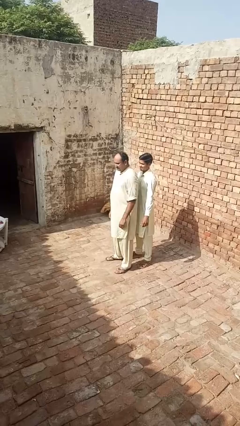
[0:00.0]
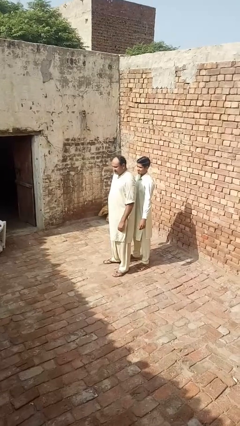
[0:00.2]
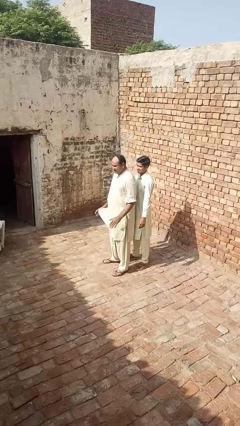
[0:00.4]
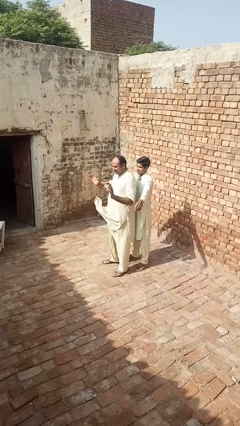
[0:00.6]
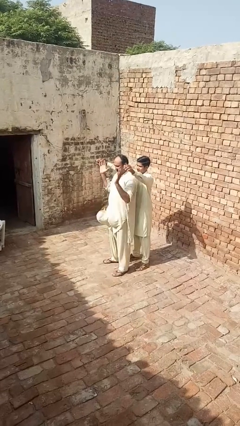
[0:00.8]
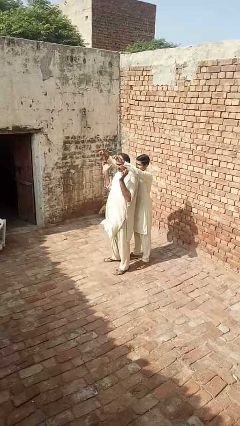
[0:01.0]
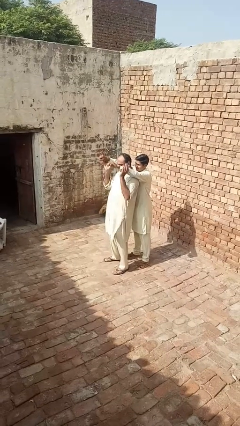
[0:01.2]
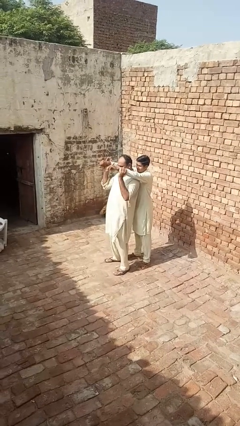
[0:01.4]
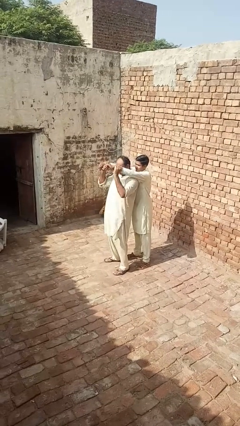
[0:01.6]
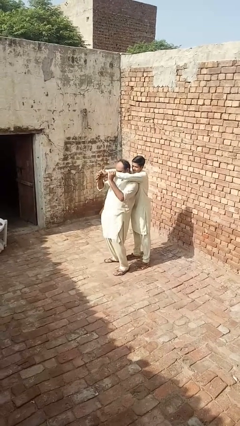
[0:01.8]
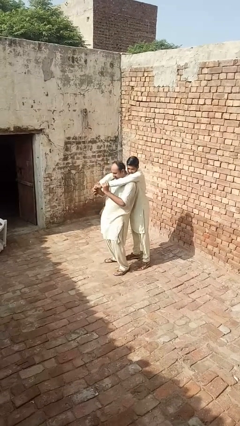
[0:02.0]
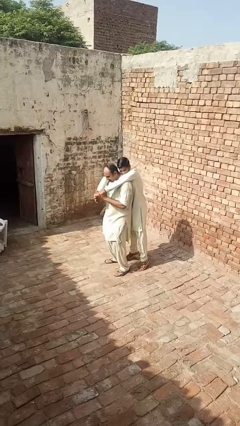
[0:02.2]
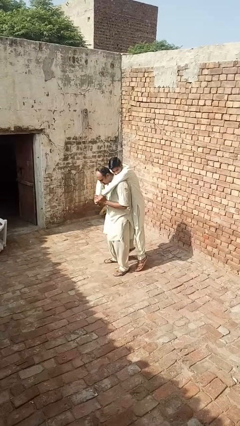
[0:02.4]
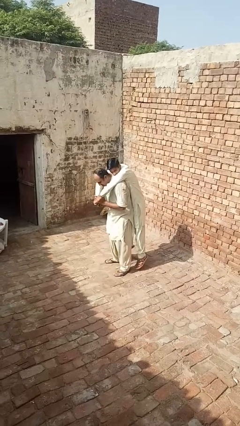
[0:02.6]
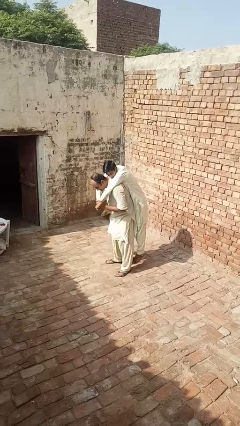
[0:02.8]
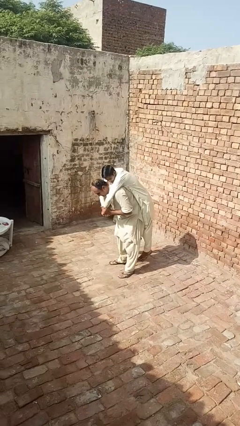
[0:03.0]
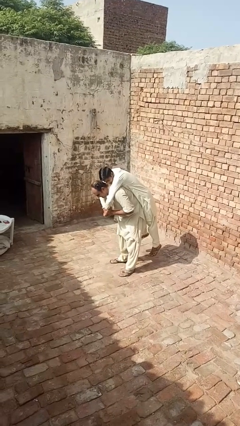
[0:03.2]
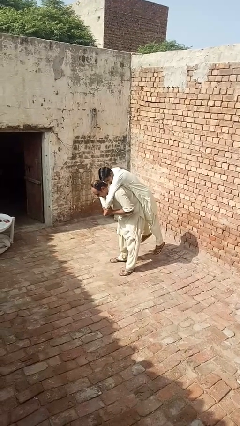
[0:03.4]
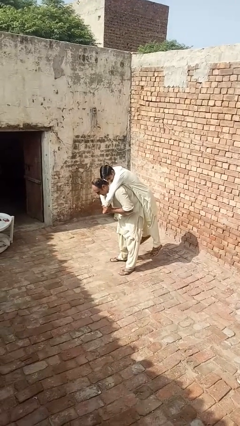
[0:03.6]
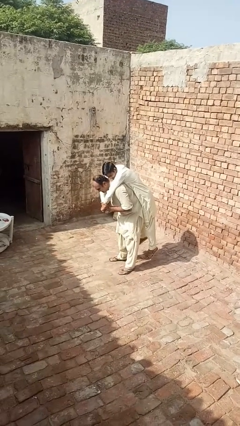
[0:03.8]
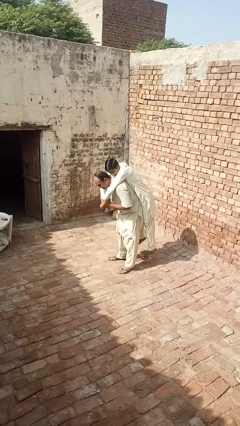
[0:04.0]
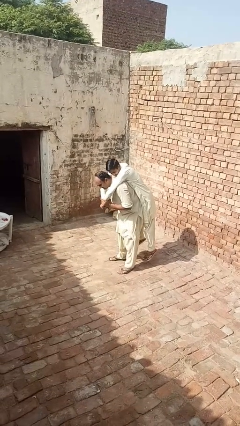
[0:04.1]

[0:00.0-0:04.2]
person carries person over shoulder

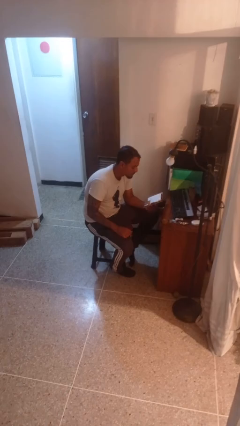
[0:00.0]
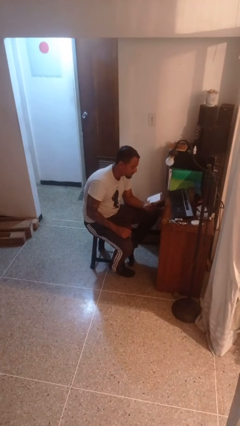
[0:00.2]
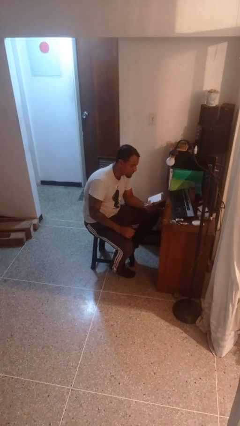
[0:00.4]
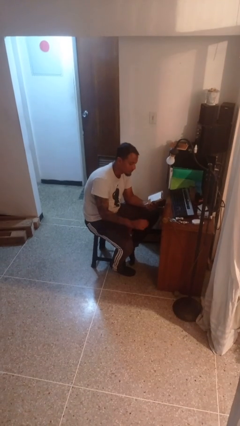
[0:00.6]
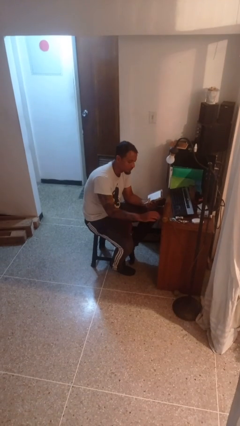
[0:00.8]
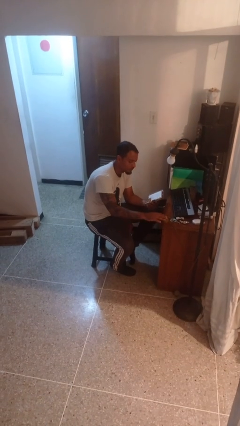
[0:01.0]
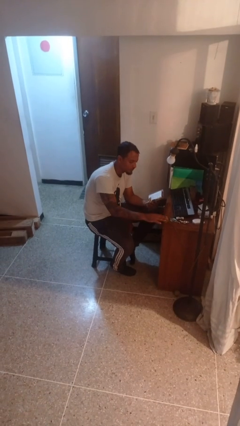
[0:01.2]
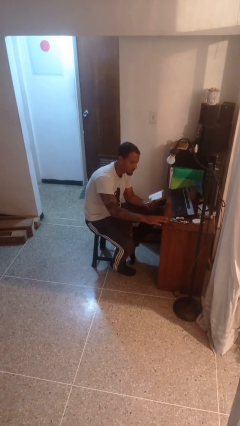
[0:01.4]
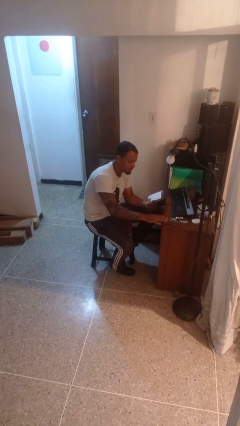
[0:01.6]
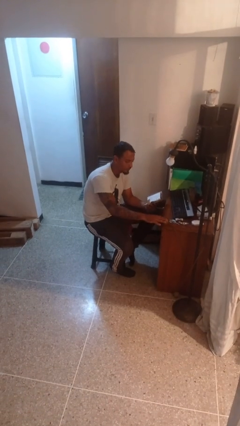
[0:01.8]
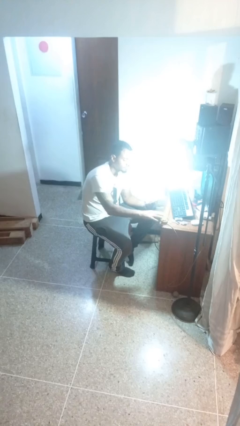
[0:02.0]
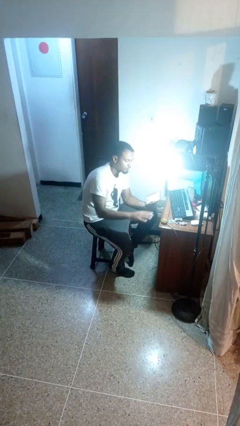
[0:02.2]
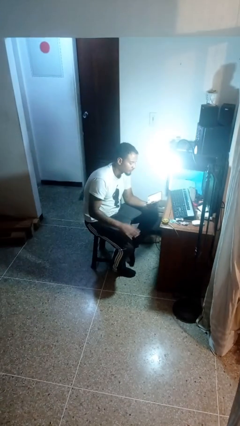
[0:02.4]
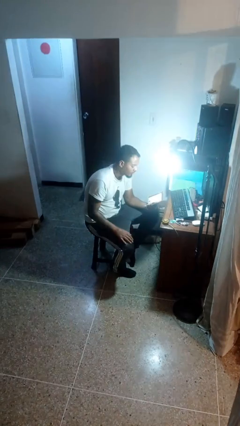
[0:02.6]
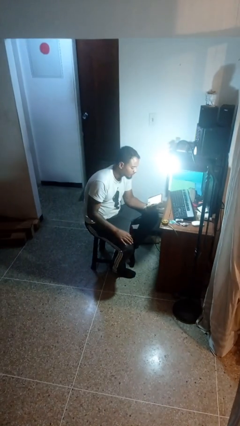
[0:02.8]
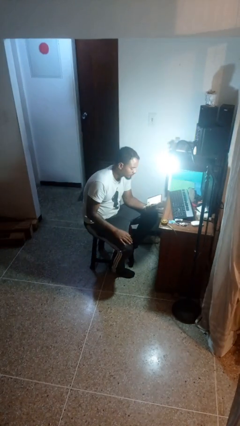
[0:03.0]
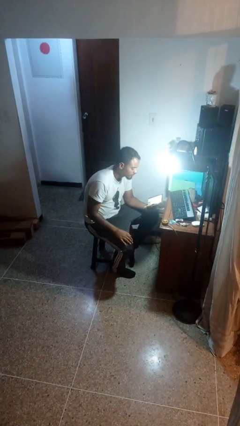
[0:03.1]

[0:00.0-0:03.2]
person turns on lamp

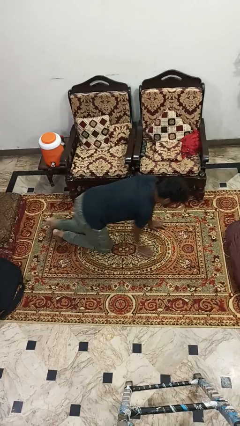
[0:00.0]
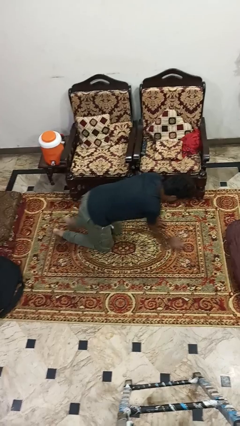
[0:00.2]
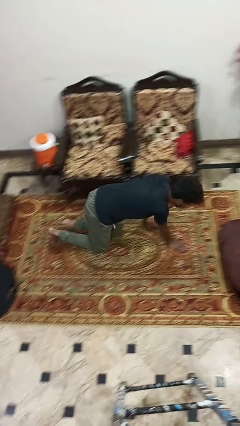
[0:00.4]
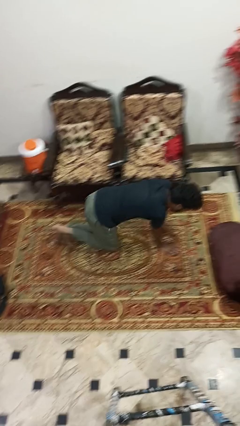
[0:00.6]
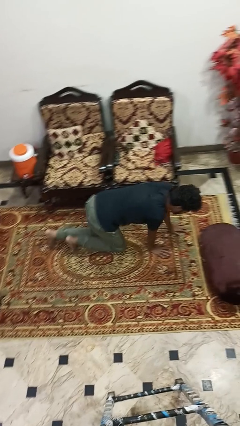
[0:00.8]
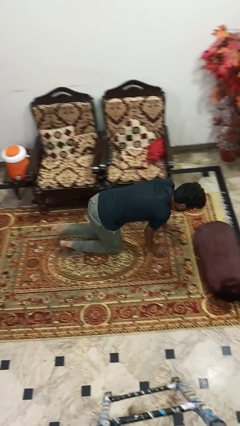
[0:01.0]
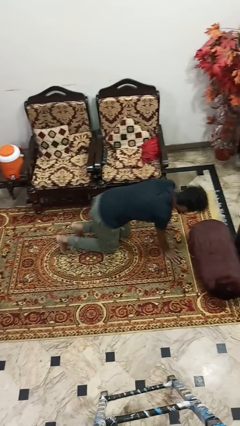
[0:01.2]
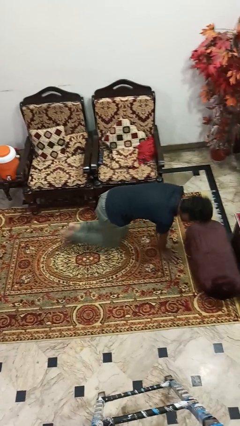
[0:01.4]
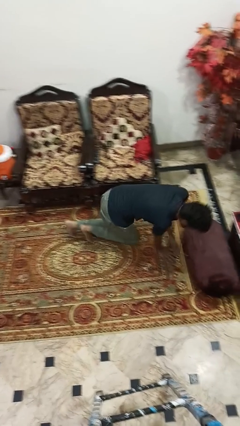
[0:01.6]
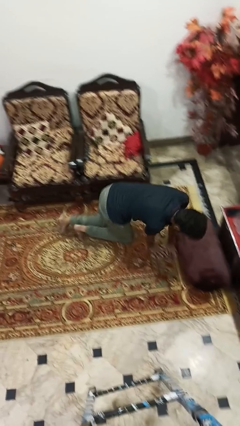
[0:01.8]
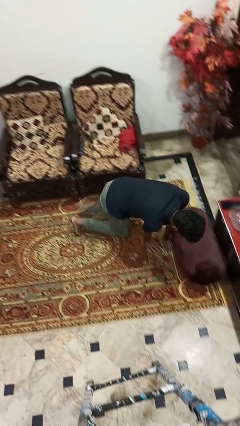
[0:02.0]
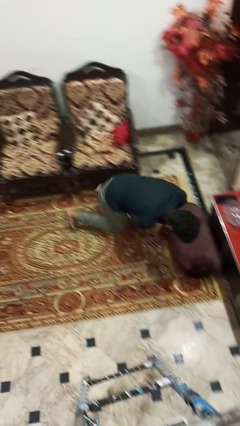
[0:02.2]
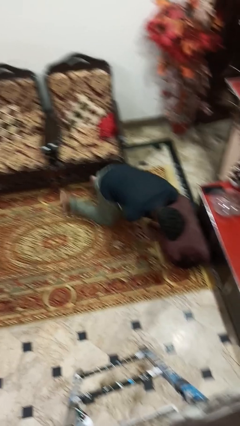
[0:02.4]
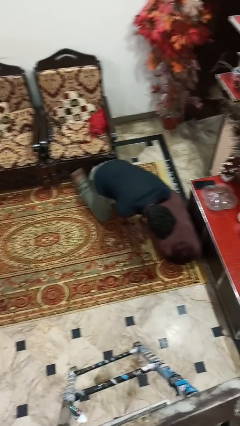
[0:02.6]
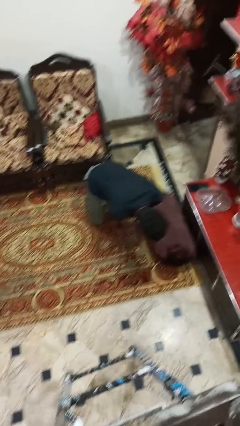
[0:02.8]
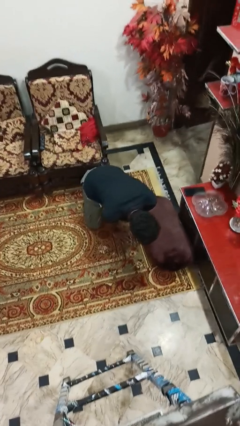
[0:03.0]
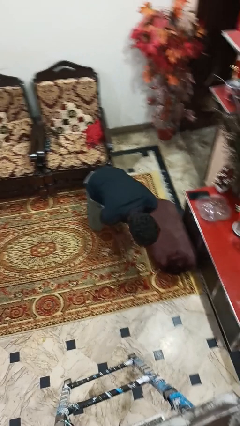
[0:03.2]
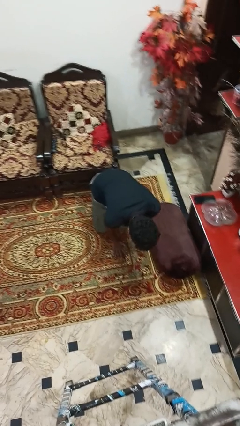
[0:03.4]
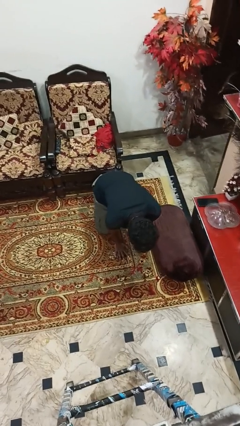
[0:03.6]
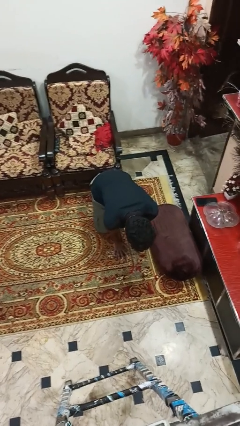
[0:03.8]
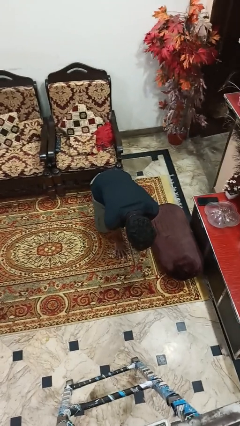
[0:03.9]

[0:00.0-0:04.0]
person crawls

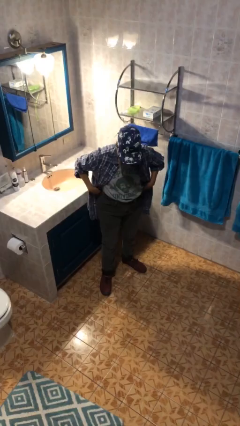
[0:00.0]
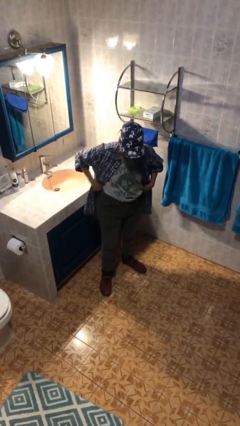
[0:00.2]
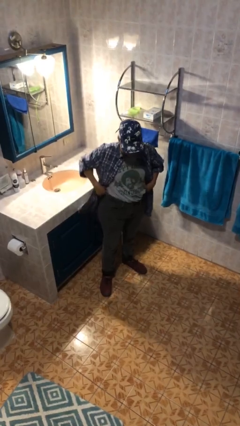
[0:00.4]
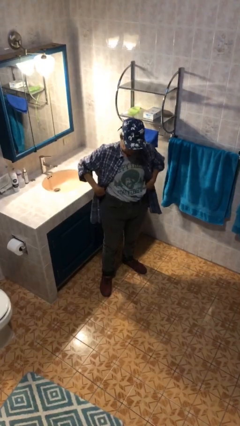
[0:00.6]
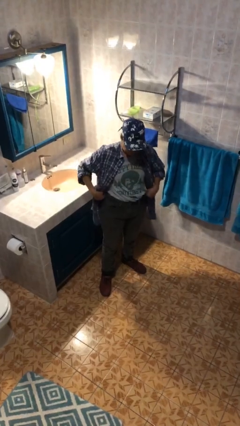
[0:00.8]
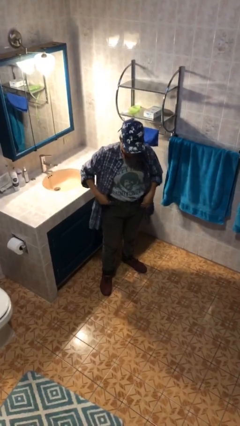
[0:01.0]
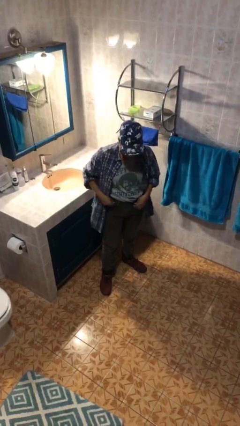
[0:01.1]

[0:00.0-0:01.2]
person hikes up pants

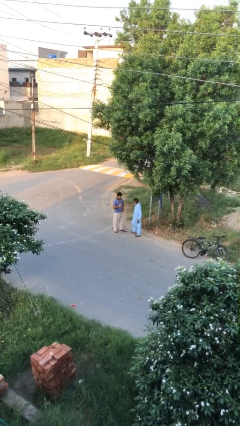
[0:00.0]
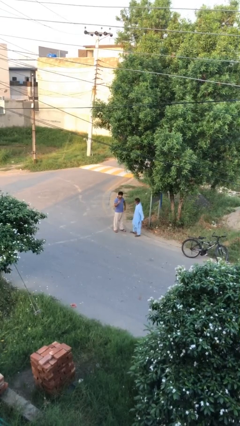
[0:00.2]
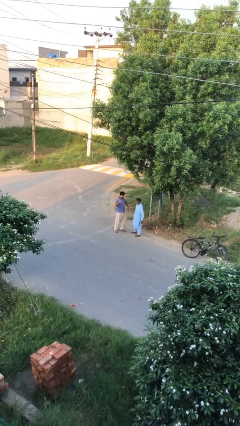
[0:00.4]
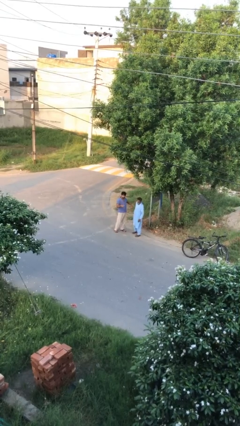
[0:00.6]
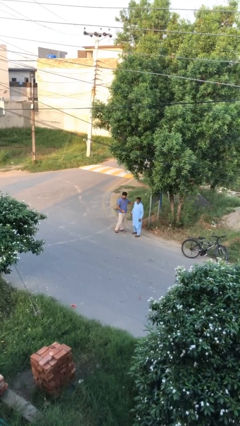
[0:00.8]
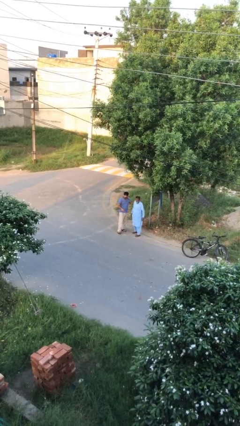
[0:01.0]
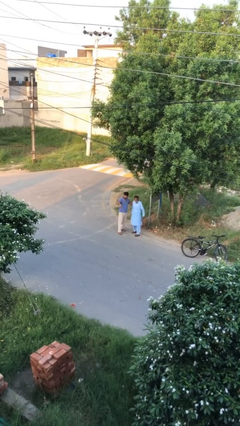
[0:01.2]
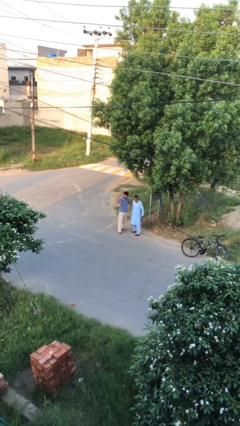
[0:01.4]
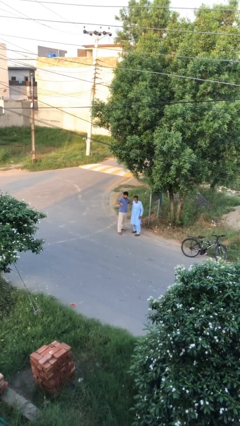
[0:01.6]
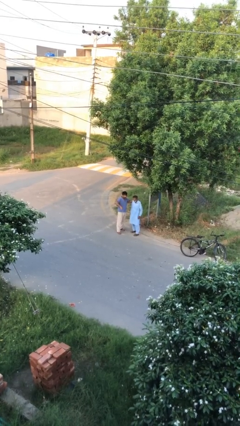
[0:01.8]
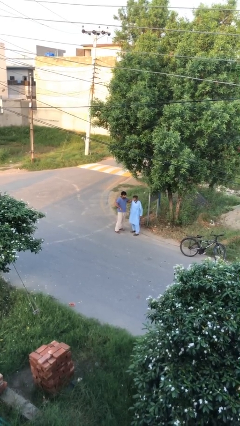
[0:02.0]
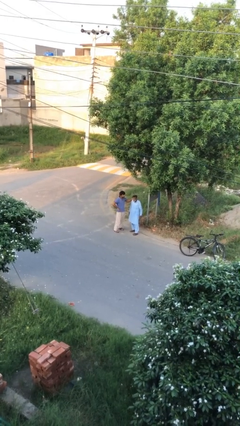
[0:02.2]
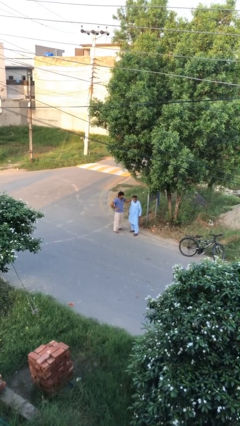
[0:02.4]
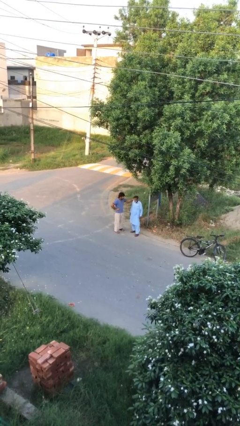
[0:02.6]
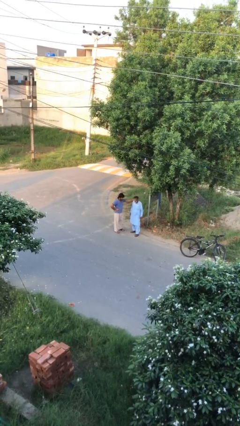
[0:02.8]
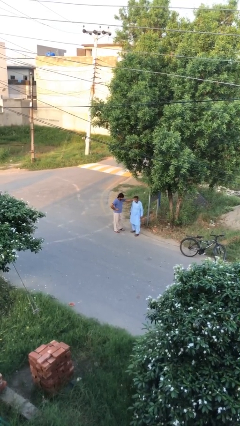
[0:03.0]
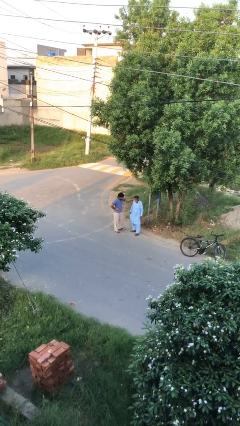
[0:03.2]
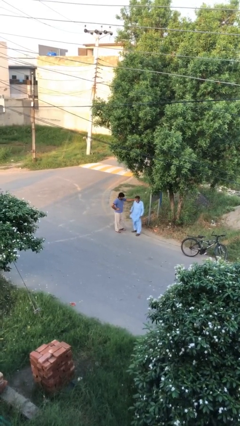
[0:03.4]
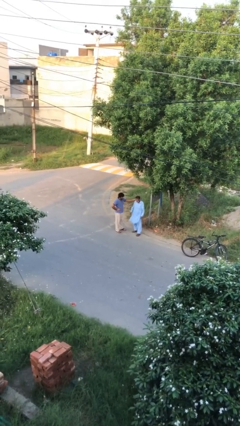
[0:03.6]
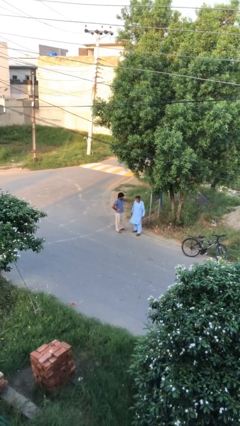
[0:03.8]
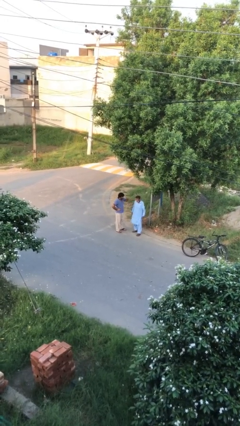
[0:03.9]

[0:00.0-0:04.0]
person talks to person

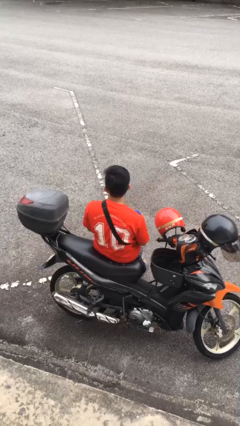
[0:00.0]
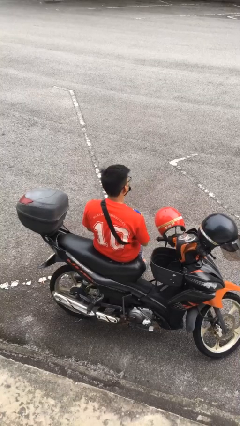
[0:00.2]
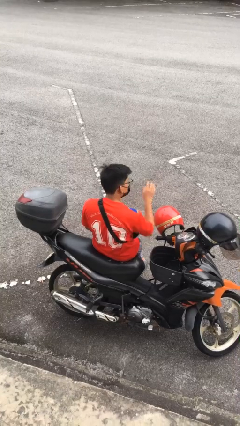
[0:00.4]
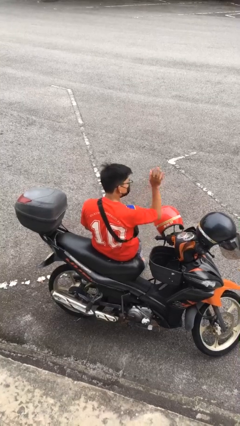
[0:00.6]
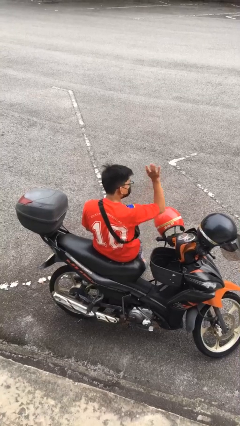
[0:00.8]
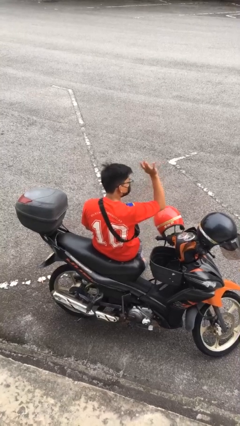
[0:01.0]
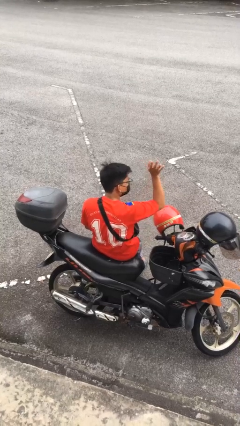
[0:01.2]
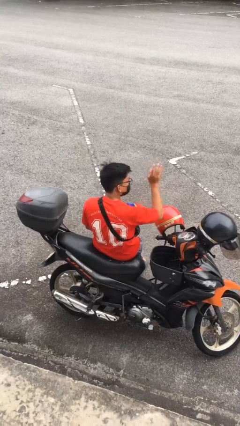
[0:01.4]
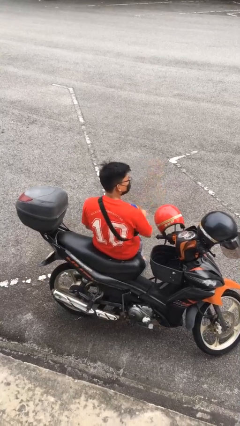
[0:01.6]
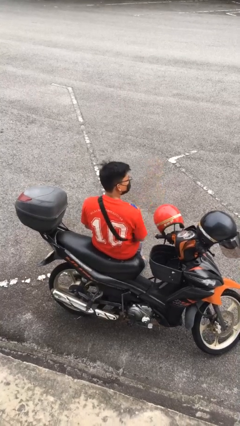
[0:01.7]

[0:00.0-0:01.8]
person waves at person
